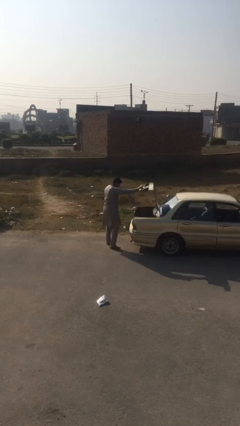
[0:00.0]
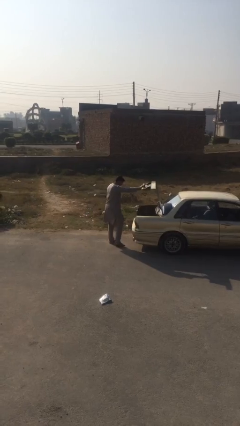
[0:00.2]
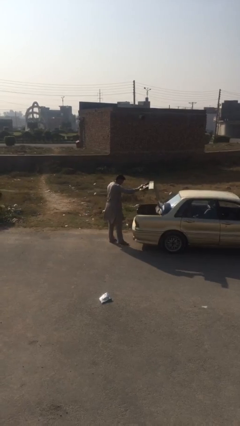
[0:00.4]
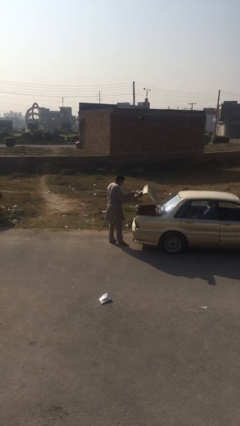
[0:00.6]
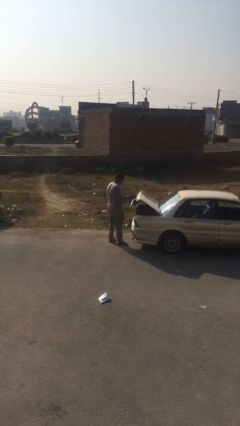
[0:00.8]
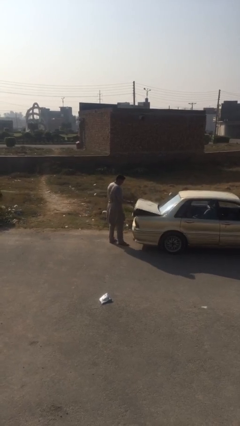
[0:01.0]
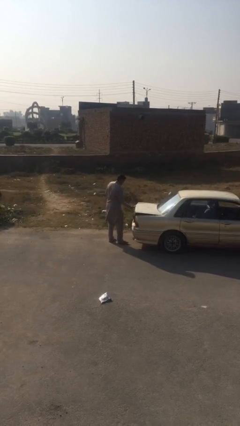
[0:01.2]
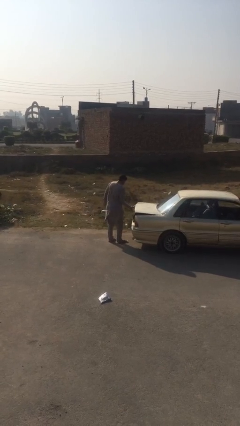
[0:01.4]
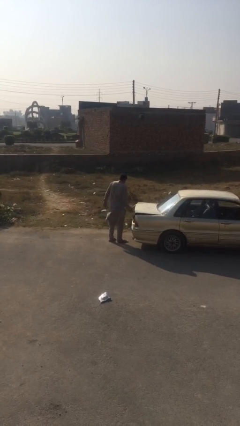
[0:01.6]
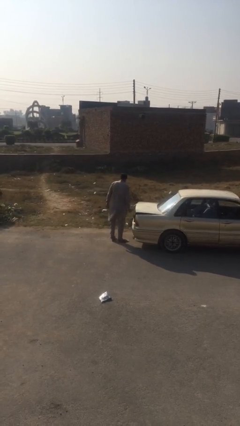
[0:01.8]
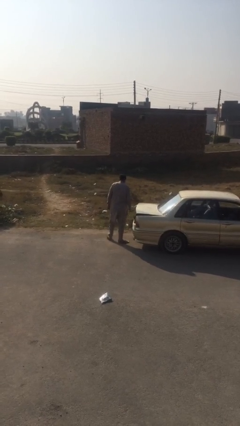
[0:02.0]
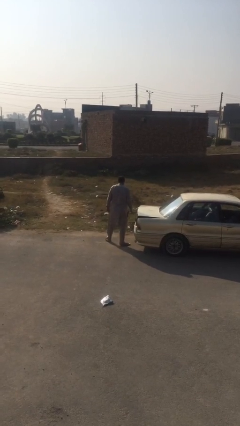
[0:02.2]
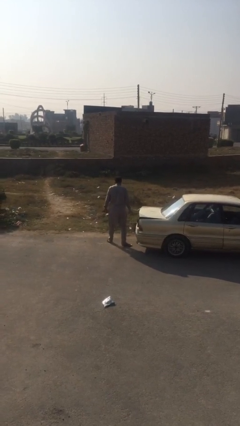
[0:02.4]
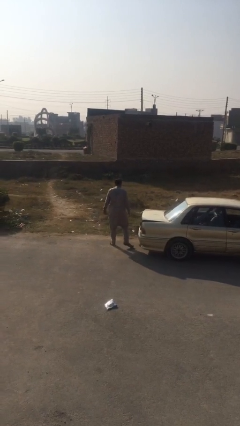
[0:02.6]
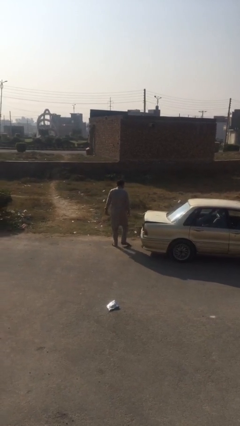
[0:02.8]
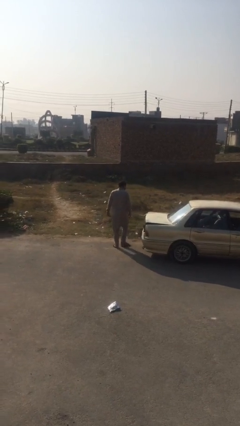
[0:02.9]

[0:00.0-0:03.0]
person closes car trunk

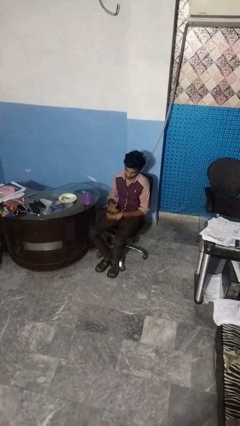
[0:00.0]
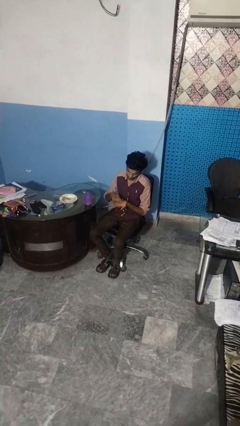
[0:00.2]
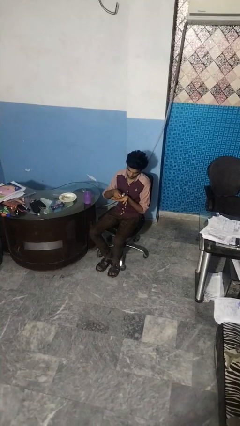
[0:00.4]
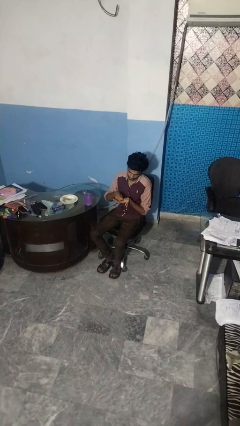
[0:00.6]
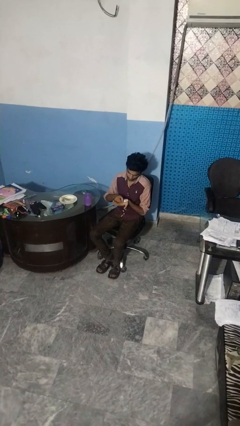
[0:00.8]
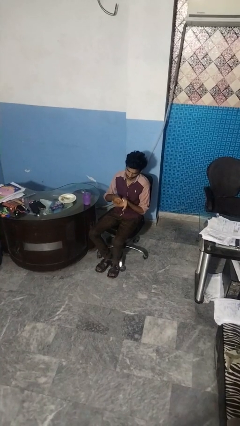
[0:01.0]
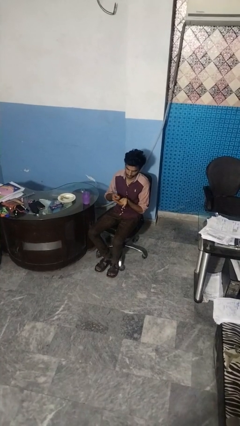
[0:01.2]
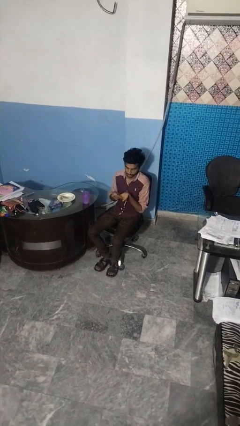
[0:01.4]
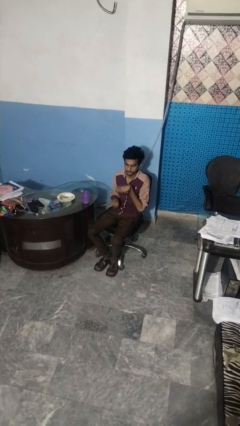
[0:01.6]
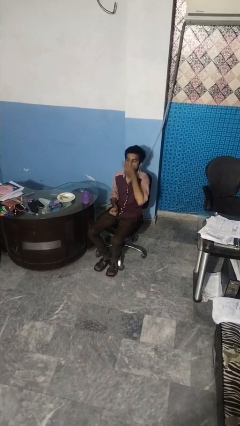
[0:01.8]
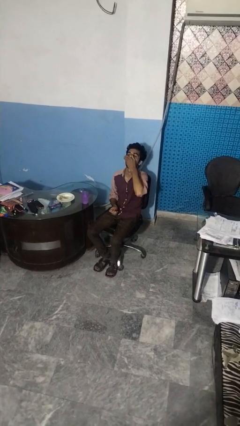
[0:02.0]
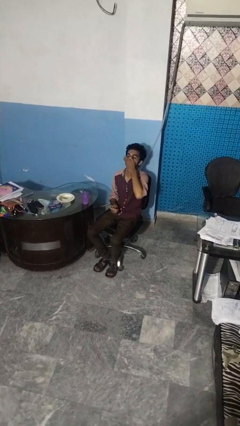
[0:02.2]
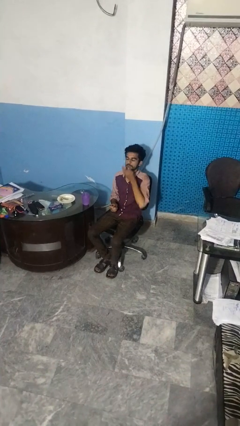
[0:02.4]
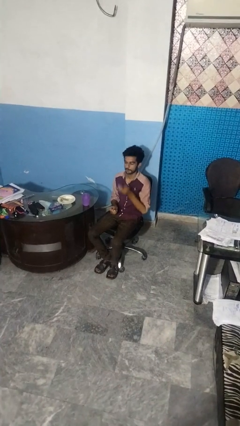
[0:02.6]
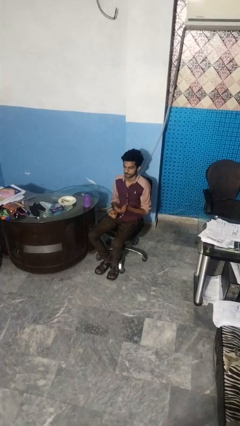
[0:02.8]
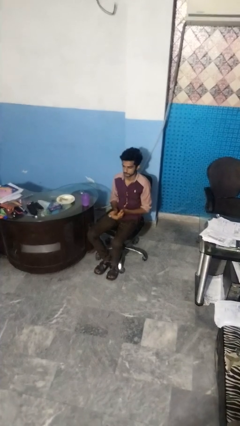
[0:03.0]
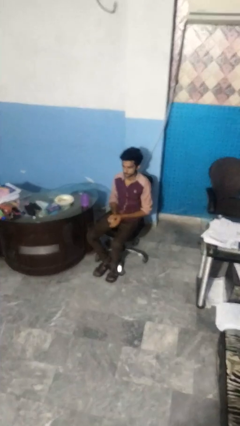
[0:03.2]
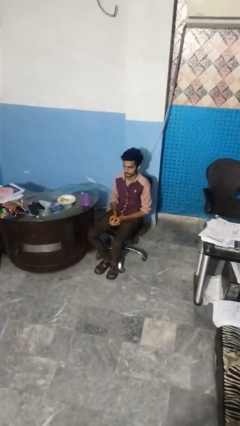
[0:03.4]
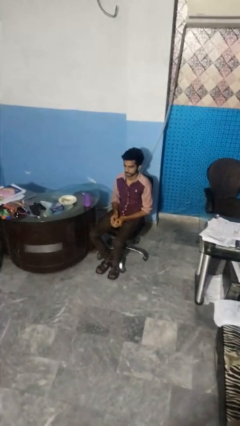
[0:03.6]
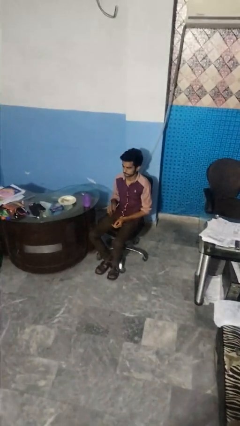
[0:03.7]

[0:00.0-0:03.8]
person takes medicine pills

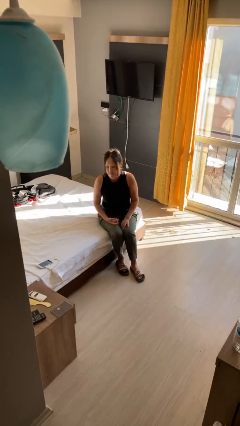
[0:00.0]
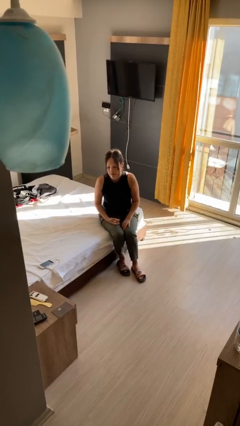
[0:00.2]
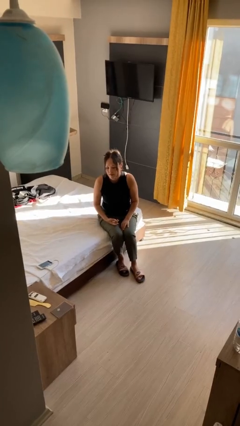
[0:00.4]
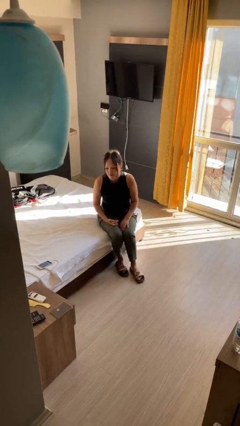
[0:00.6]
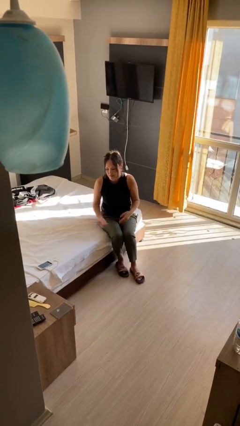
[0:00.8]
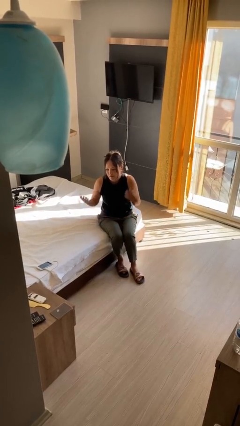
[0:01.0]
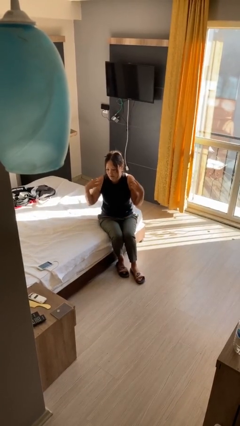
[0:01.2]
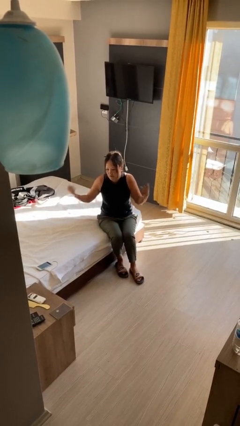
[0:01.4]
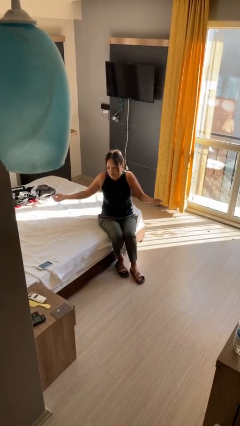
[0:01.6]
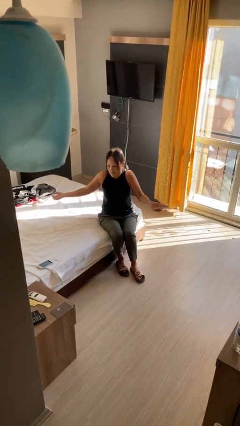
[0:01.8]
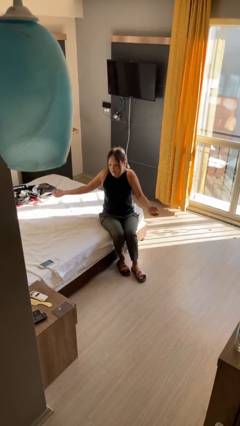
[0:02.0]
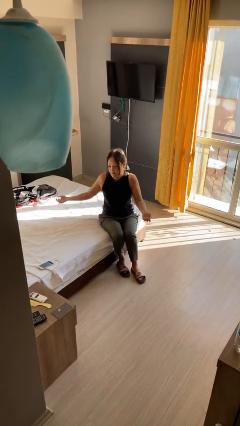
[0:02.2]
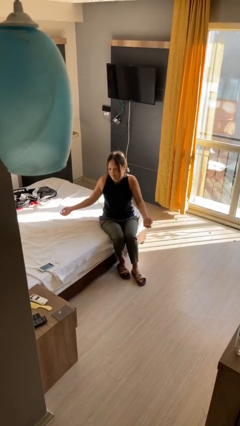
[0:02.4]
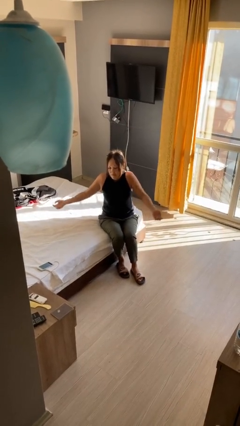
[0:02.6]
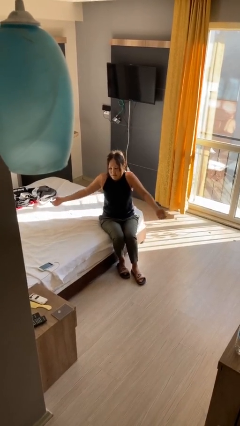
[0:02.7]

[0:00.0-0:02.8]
person shrugs

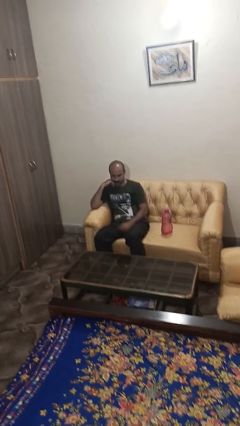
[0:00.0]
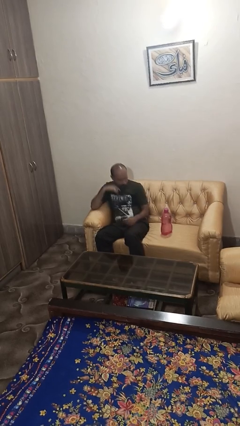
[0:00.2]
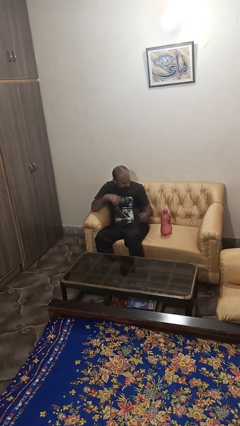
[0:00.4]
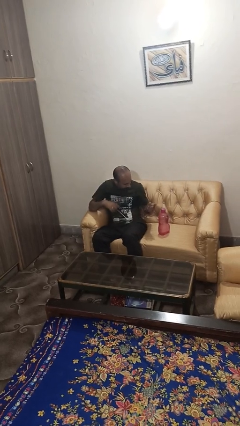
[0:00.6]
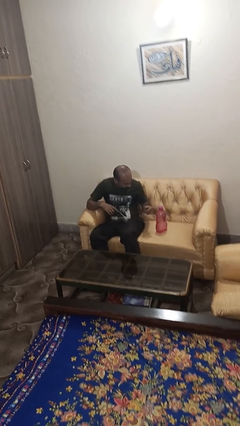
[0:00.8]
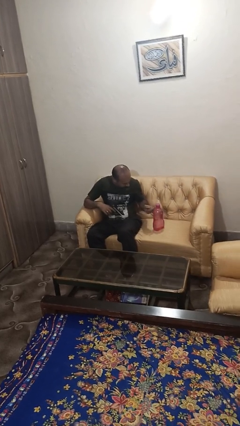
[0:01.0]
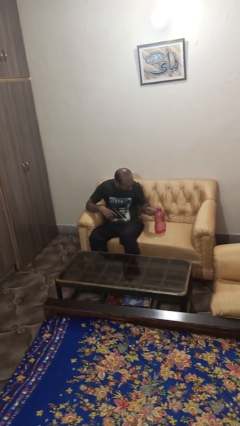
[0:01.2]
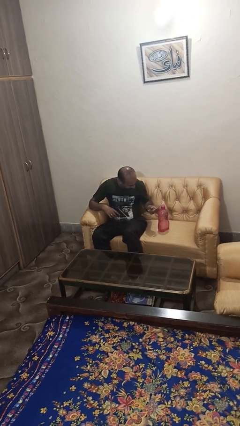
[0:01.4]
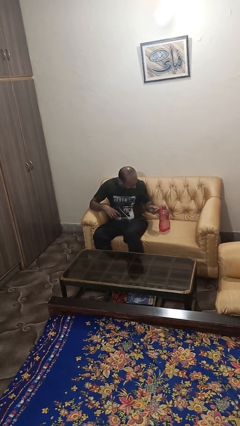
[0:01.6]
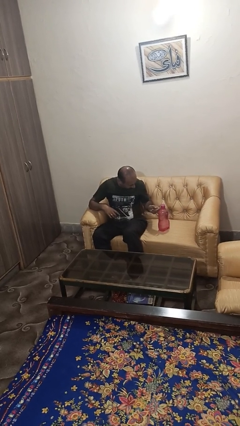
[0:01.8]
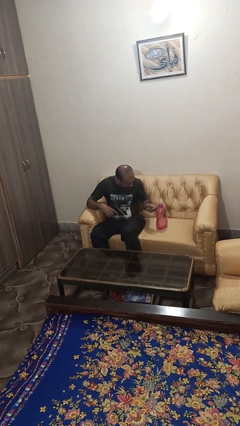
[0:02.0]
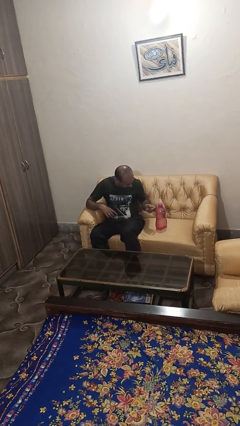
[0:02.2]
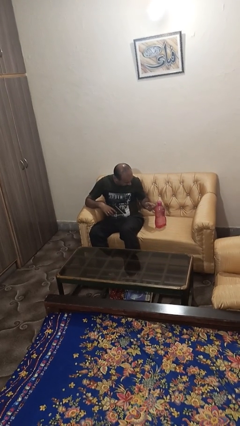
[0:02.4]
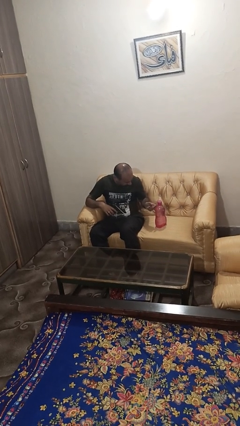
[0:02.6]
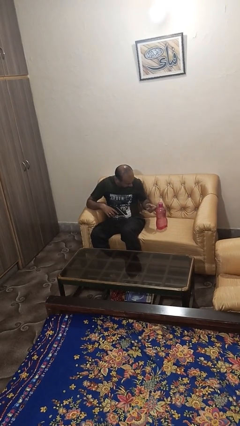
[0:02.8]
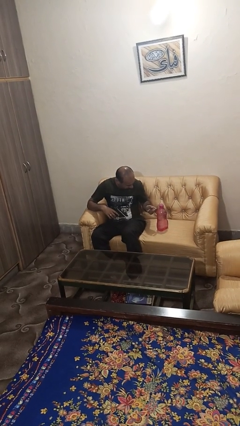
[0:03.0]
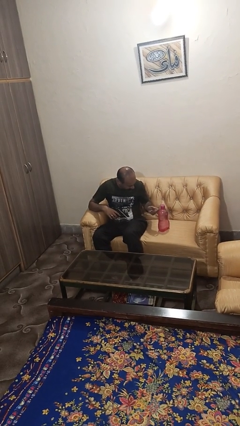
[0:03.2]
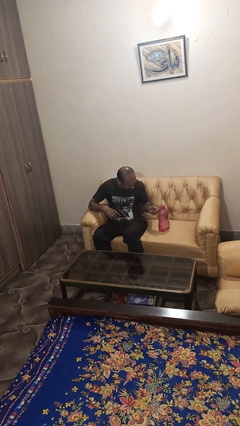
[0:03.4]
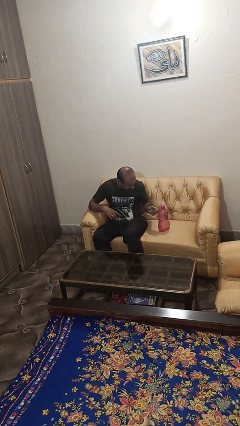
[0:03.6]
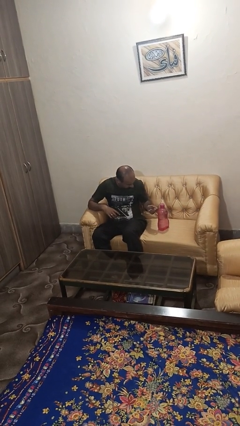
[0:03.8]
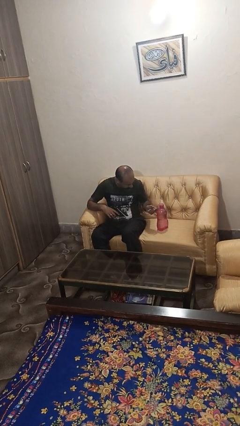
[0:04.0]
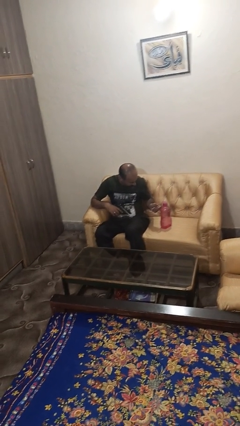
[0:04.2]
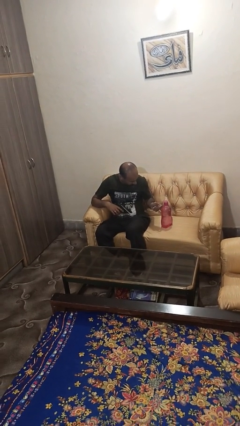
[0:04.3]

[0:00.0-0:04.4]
person taps object with finger

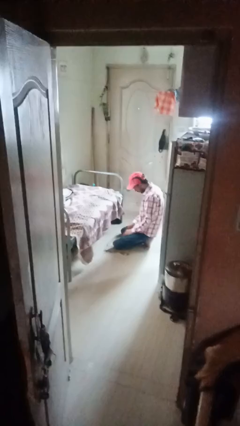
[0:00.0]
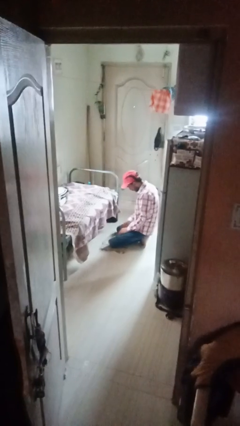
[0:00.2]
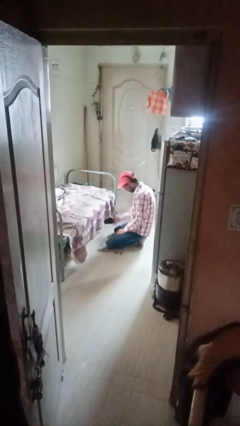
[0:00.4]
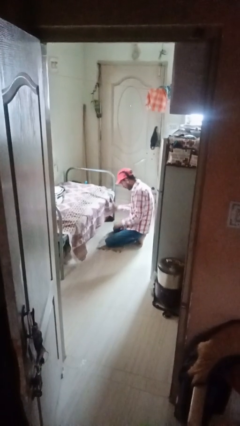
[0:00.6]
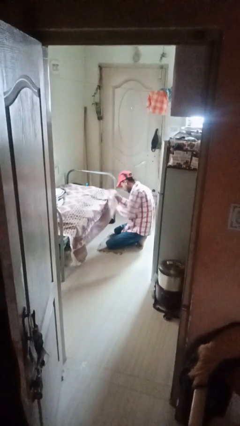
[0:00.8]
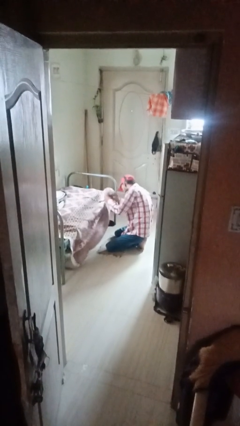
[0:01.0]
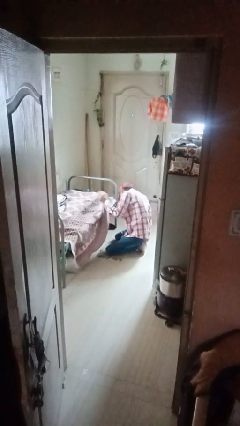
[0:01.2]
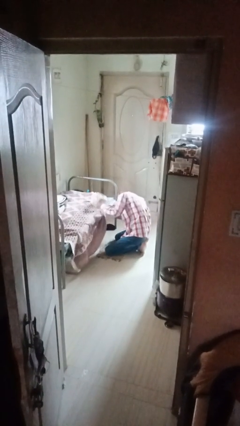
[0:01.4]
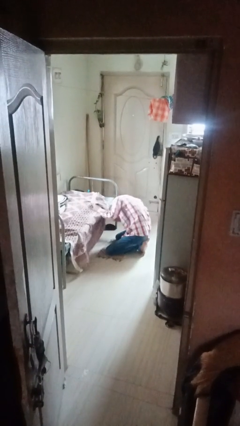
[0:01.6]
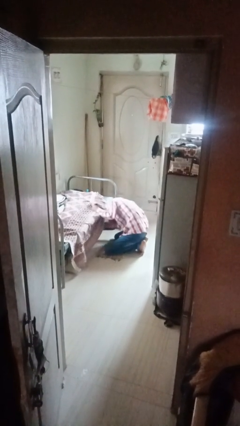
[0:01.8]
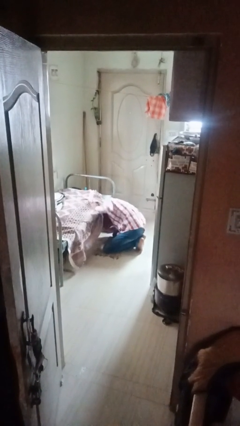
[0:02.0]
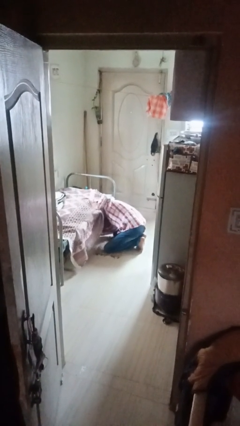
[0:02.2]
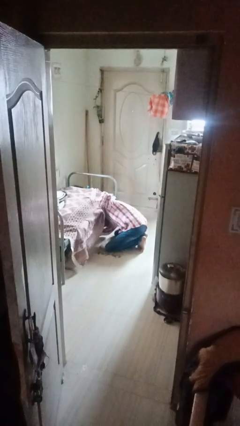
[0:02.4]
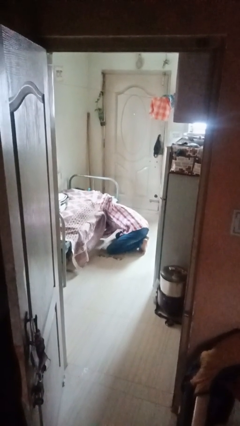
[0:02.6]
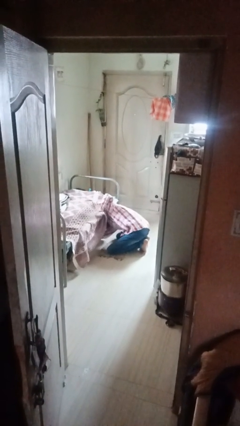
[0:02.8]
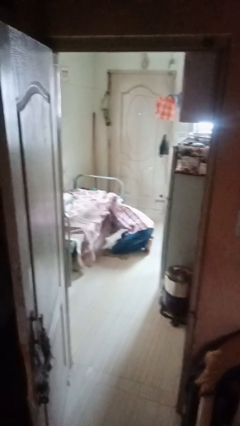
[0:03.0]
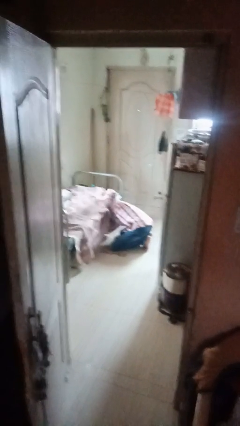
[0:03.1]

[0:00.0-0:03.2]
person searches under bed

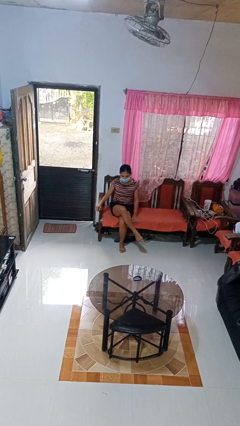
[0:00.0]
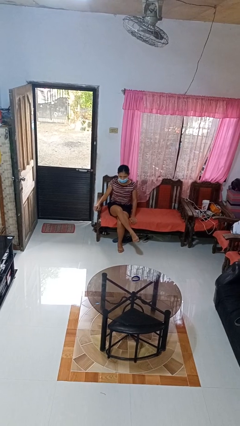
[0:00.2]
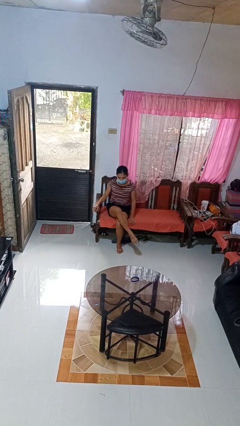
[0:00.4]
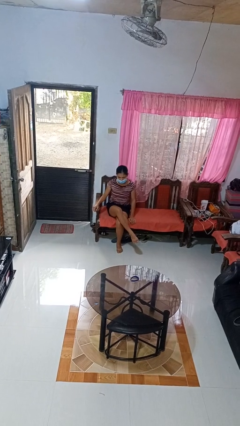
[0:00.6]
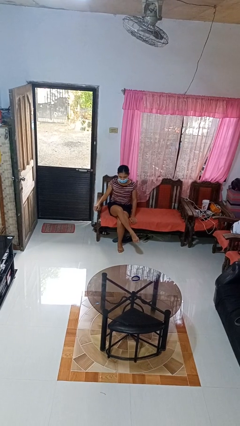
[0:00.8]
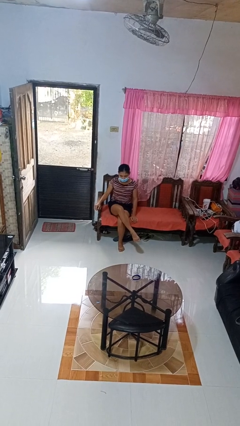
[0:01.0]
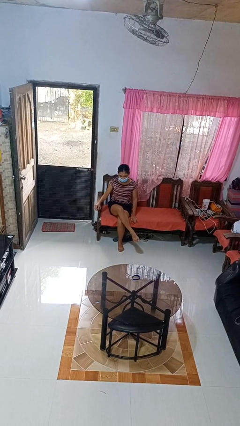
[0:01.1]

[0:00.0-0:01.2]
person crosses legs
